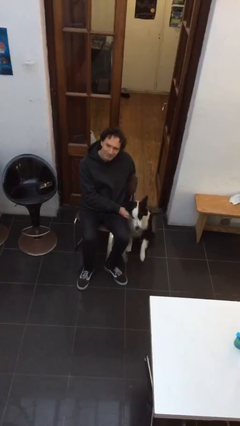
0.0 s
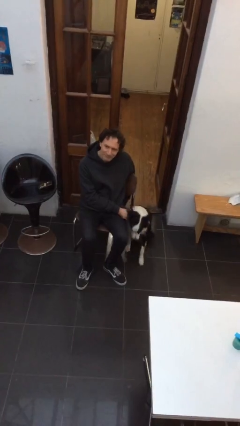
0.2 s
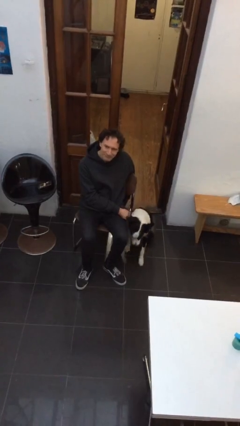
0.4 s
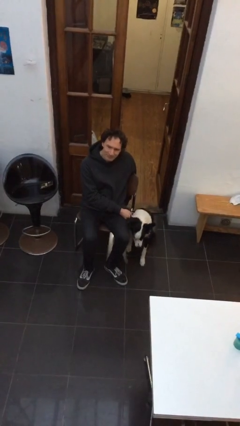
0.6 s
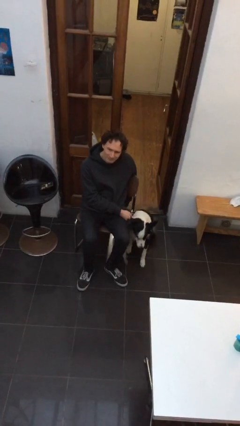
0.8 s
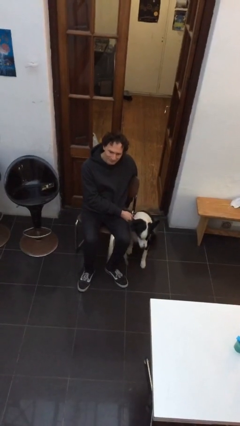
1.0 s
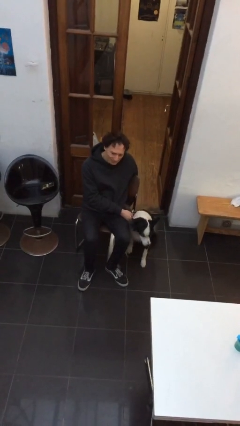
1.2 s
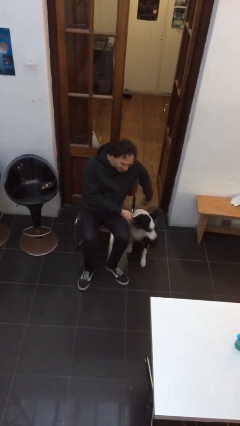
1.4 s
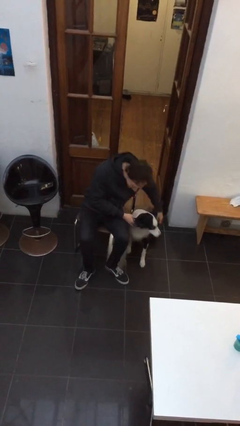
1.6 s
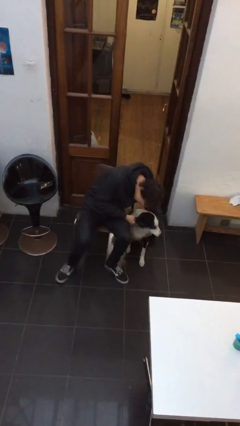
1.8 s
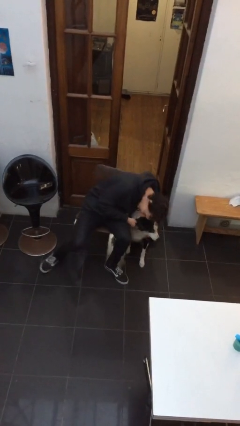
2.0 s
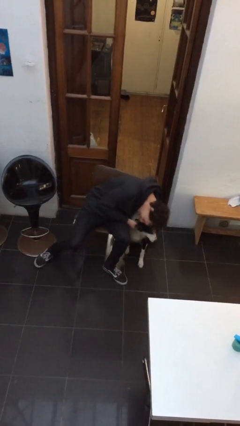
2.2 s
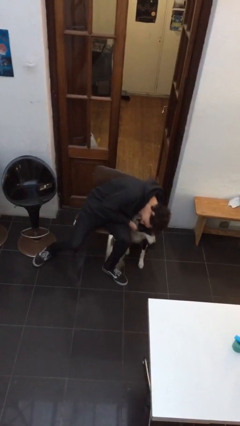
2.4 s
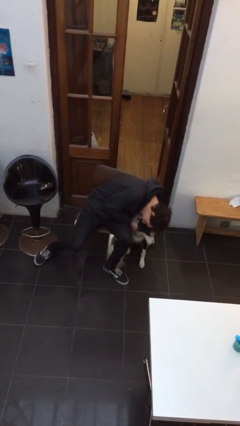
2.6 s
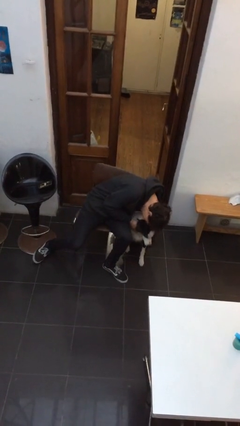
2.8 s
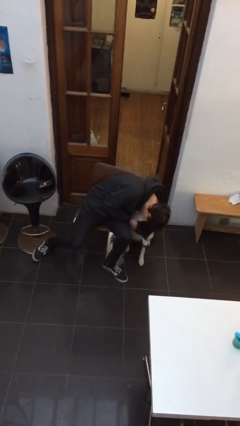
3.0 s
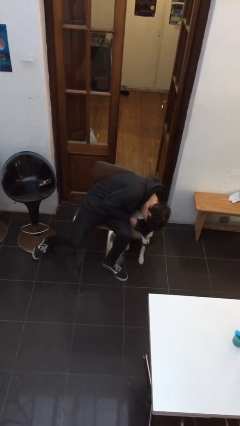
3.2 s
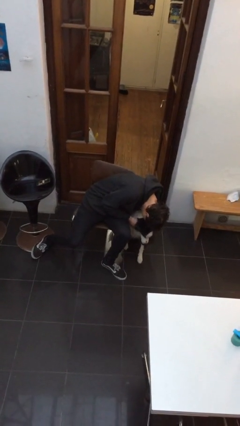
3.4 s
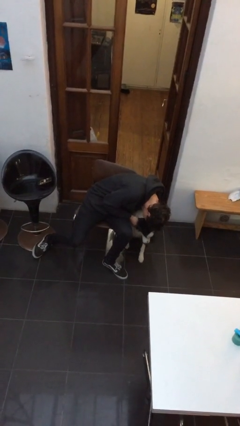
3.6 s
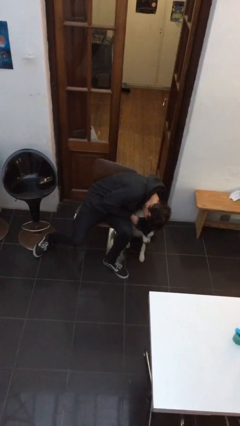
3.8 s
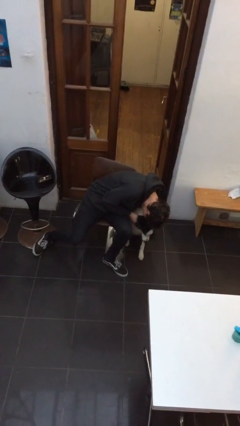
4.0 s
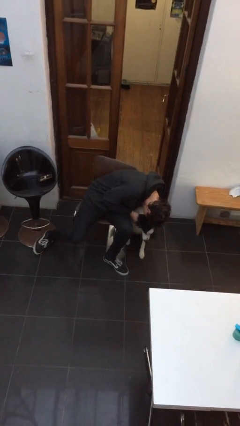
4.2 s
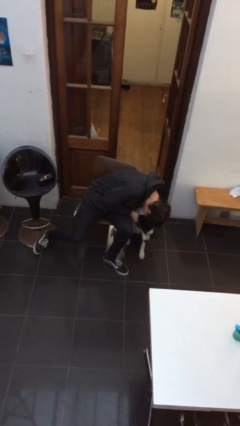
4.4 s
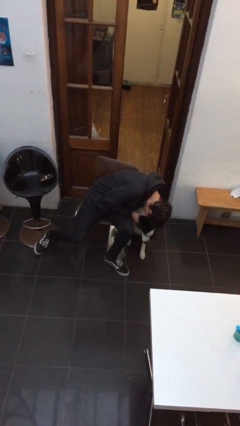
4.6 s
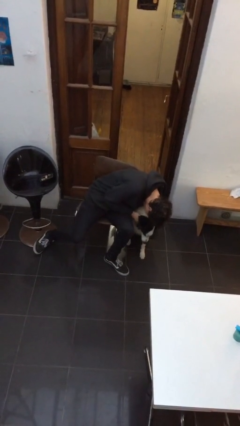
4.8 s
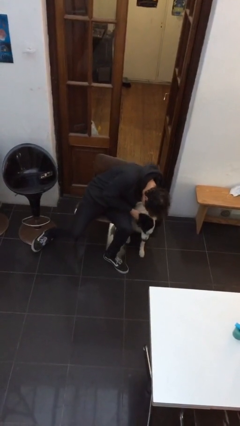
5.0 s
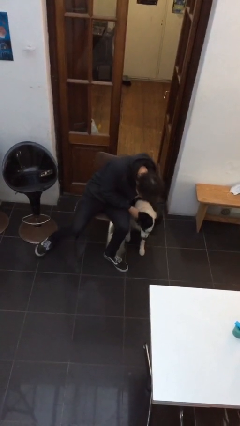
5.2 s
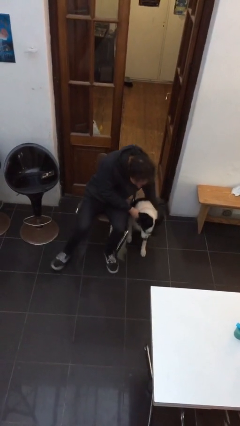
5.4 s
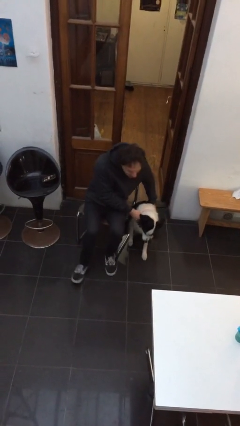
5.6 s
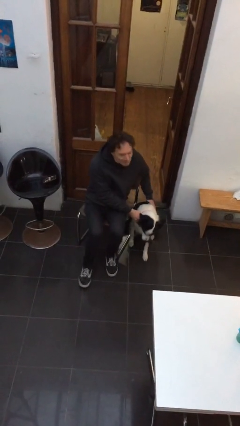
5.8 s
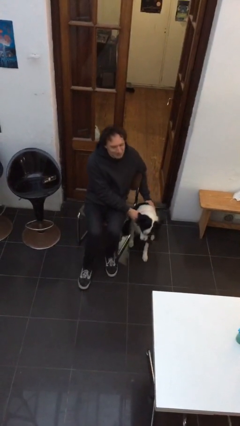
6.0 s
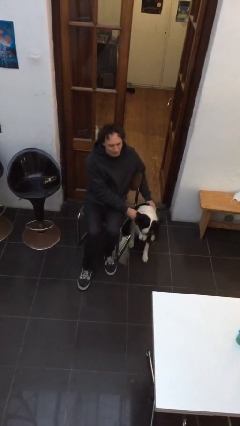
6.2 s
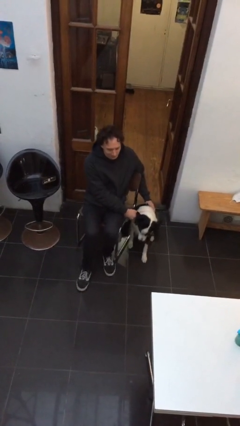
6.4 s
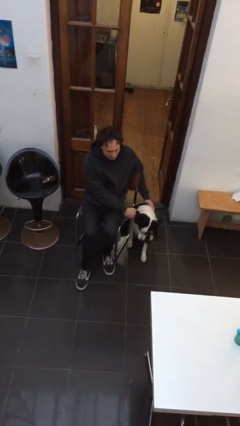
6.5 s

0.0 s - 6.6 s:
person hugs dog

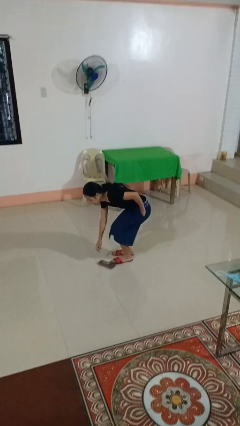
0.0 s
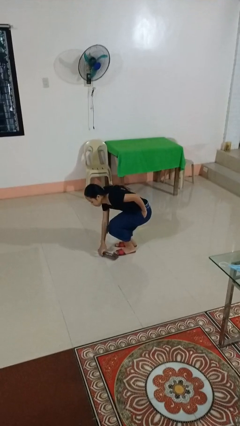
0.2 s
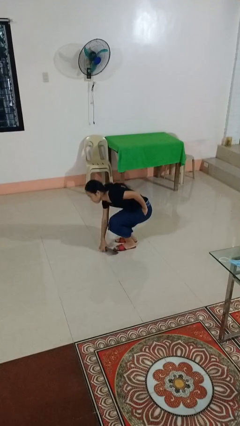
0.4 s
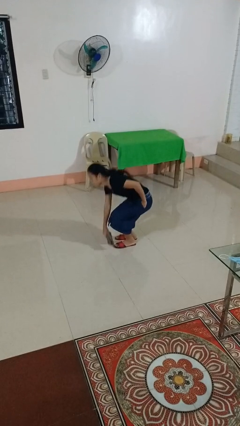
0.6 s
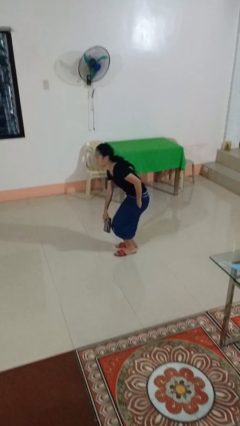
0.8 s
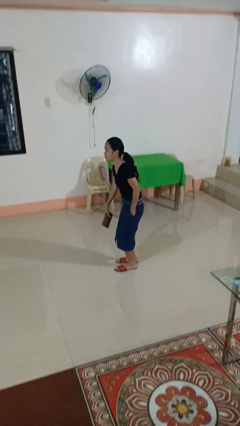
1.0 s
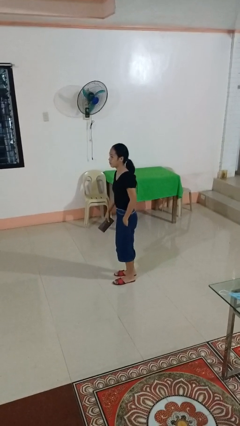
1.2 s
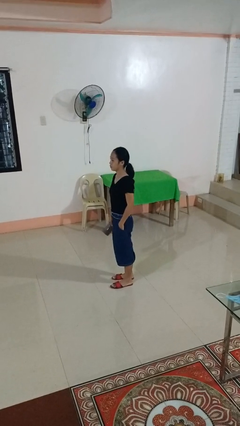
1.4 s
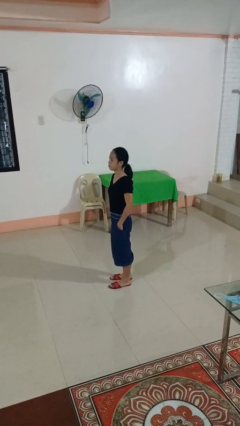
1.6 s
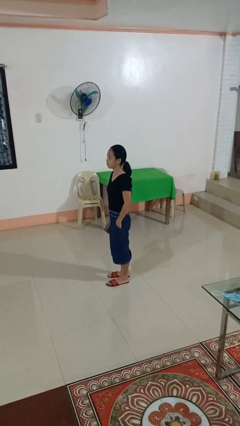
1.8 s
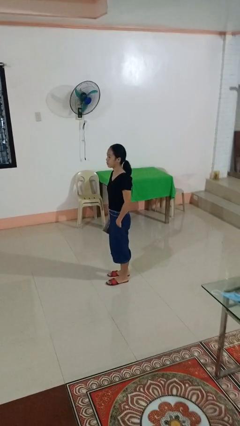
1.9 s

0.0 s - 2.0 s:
person picks up object from floor

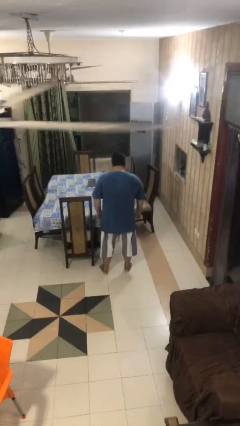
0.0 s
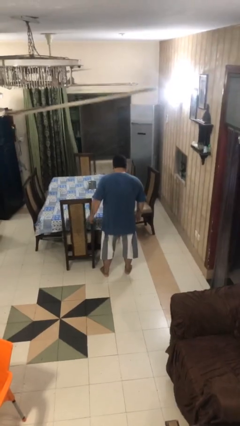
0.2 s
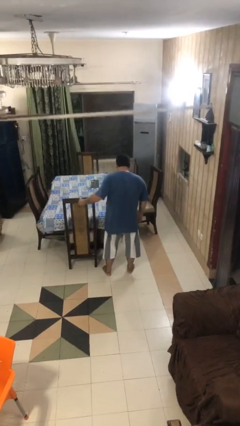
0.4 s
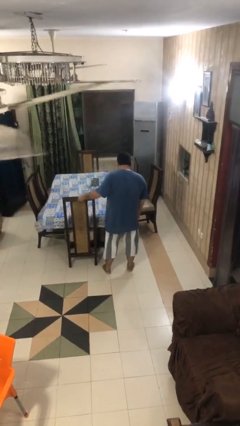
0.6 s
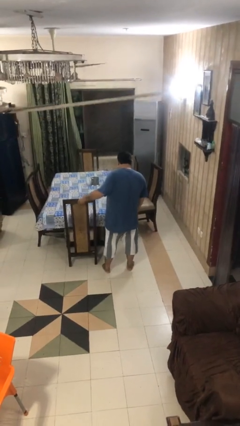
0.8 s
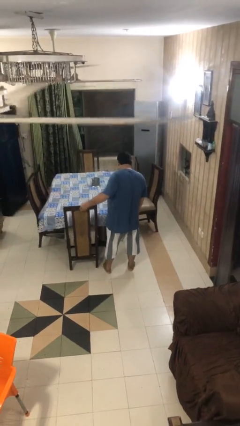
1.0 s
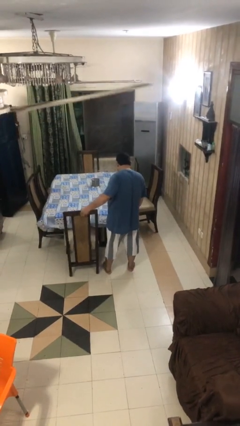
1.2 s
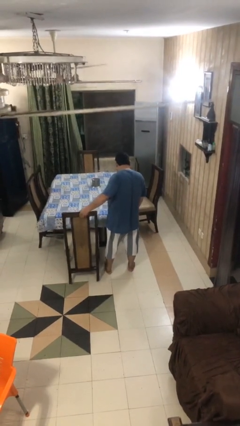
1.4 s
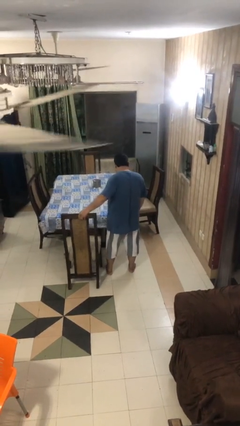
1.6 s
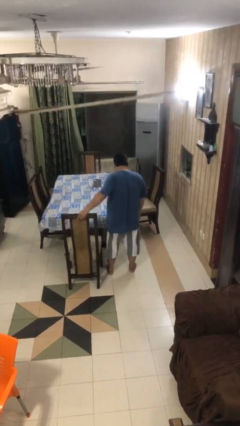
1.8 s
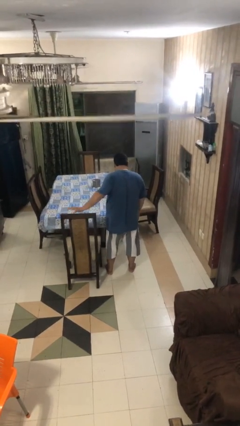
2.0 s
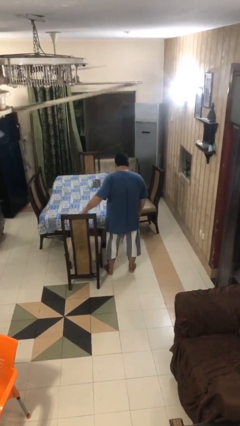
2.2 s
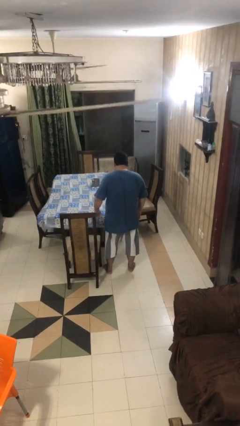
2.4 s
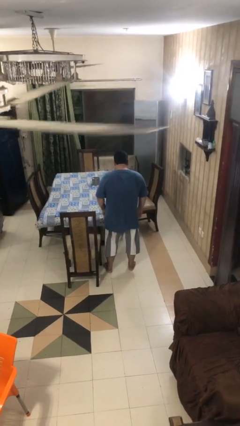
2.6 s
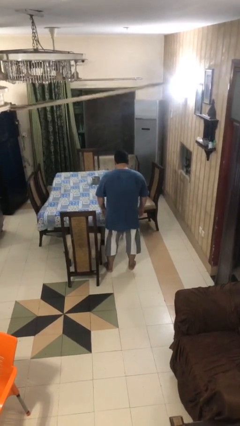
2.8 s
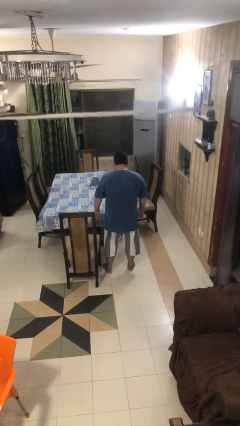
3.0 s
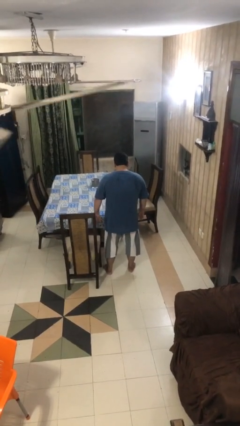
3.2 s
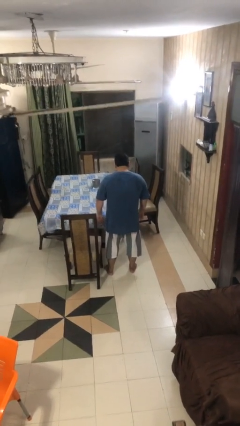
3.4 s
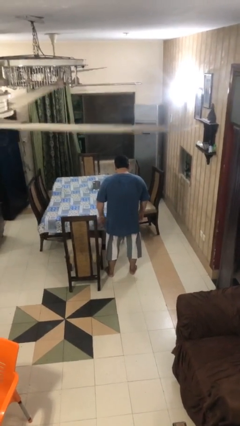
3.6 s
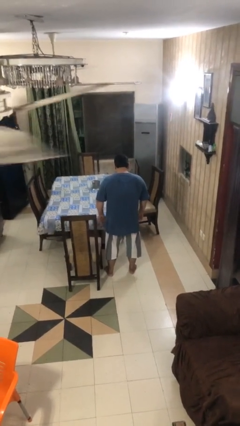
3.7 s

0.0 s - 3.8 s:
person pulls out chair

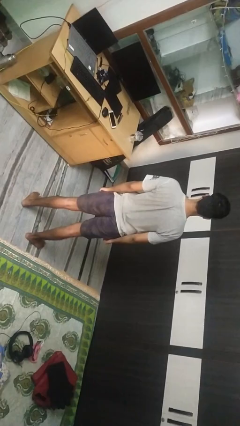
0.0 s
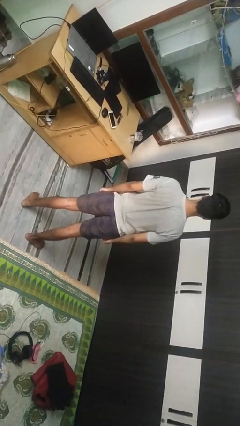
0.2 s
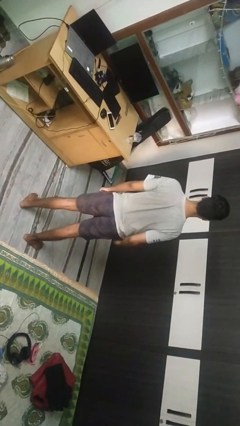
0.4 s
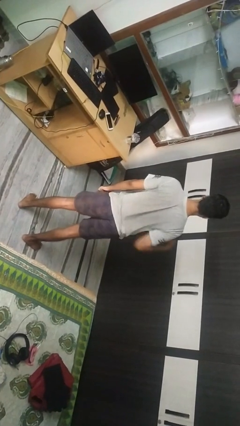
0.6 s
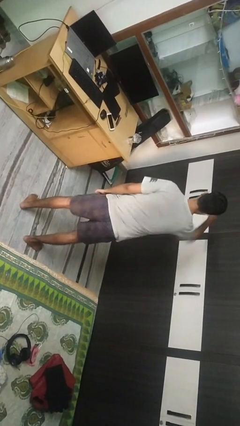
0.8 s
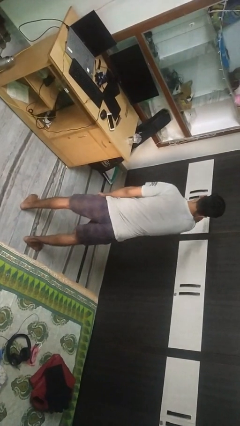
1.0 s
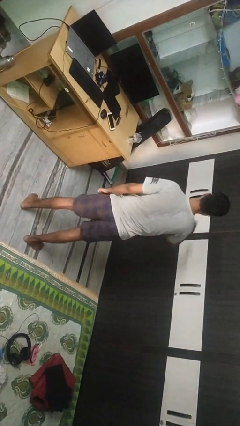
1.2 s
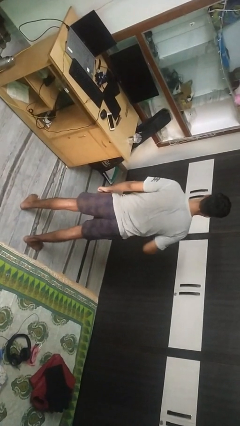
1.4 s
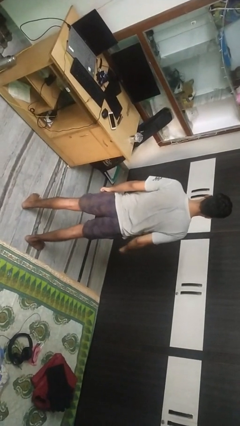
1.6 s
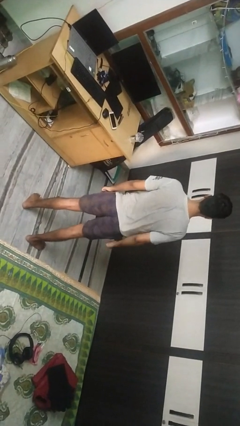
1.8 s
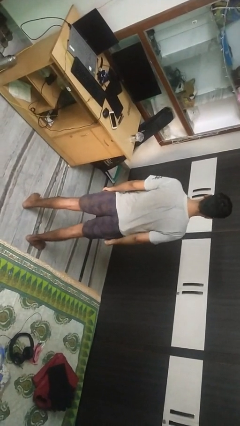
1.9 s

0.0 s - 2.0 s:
person punches

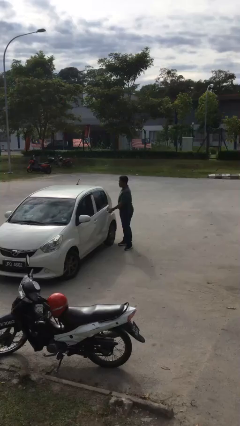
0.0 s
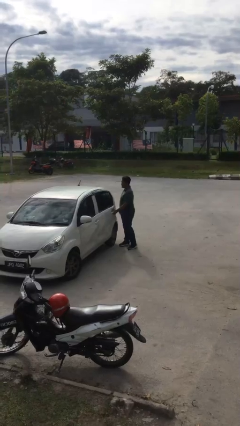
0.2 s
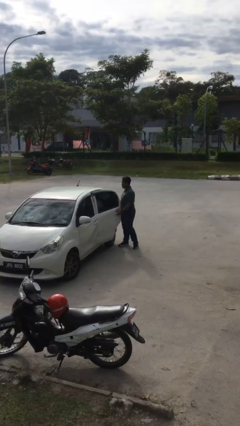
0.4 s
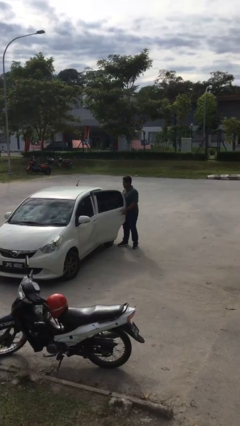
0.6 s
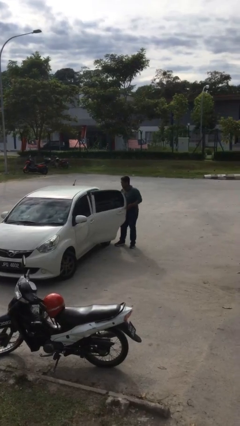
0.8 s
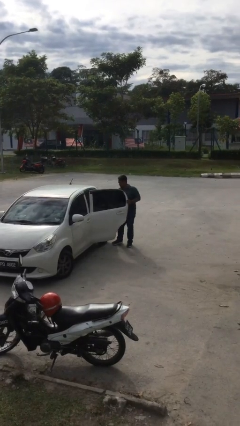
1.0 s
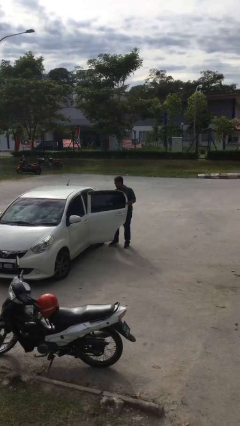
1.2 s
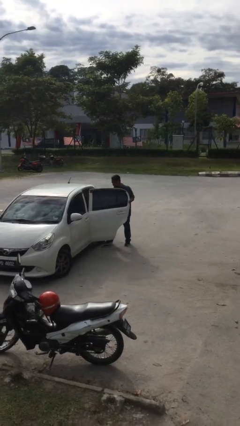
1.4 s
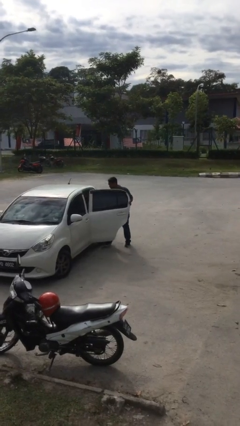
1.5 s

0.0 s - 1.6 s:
person opens car door

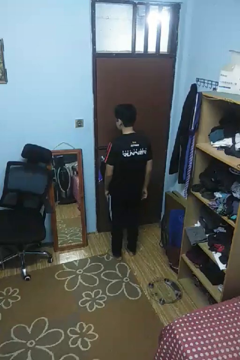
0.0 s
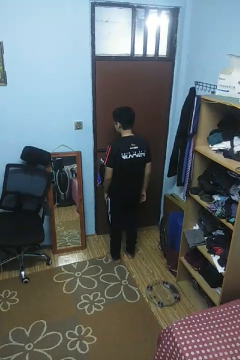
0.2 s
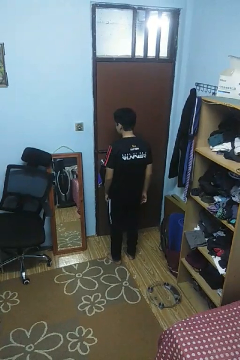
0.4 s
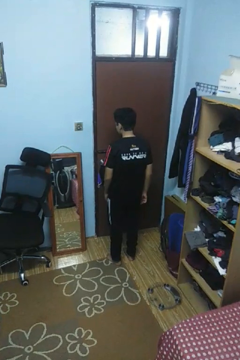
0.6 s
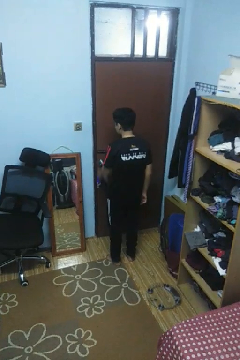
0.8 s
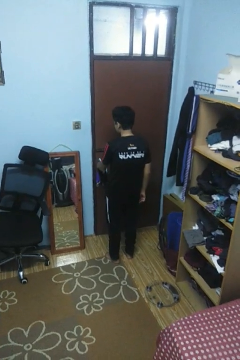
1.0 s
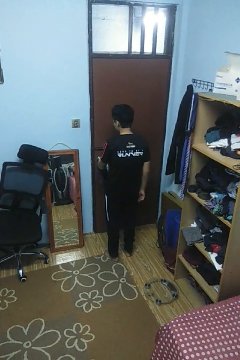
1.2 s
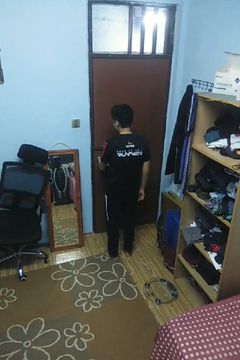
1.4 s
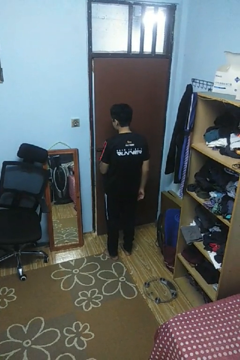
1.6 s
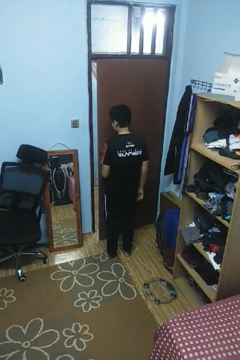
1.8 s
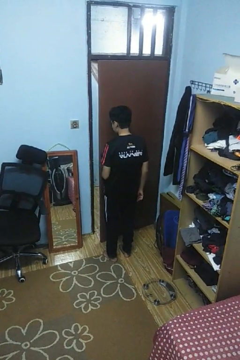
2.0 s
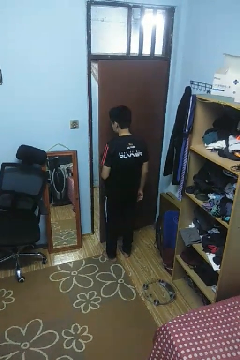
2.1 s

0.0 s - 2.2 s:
person opens facility door
